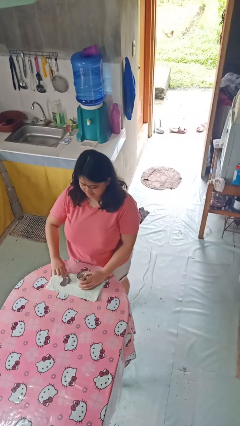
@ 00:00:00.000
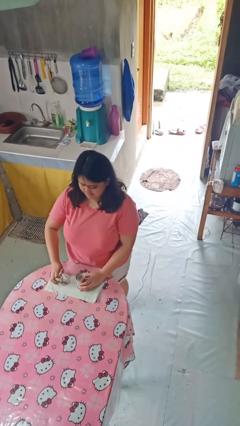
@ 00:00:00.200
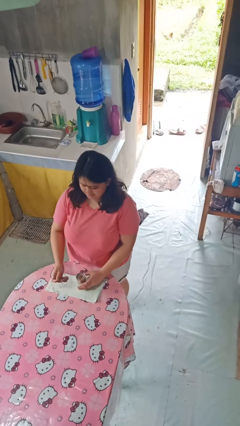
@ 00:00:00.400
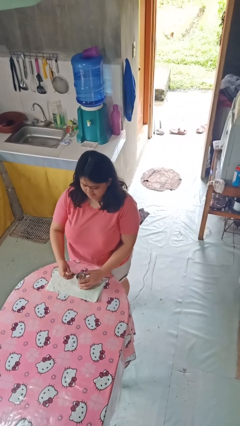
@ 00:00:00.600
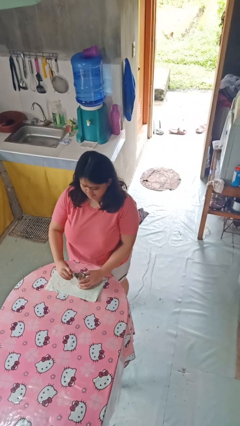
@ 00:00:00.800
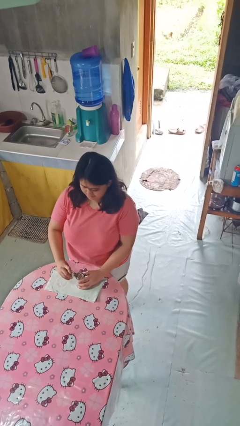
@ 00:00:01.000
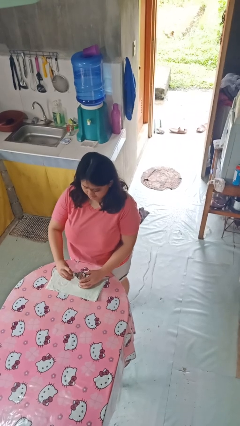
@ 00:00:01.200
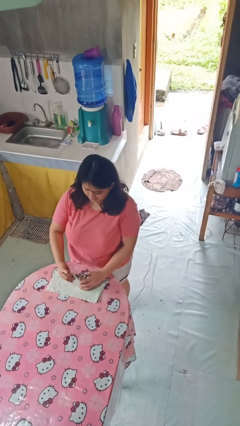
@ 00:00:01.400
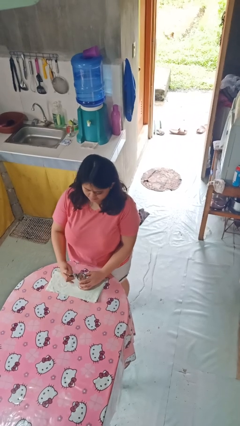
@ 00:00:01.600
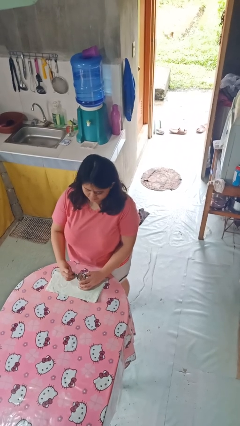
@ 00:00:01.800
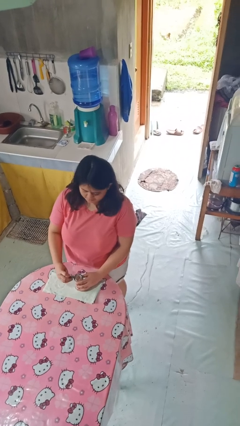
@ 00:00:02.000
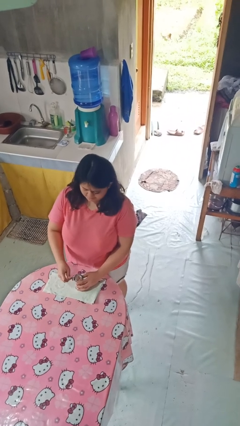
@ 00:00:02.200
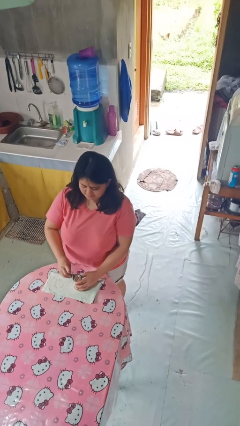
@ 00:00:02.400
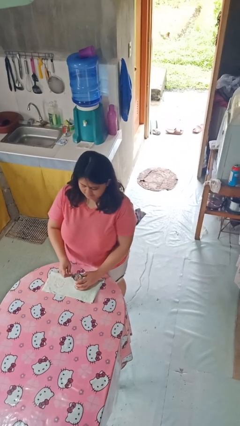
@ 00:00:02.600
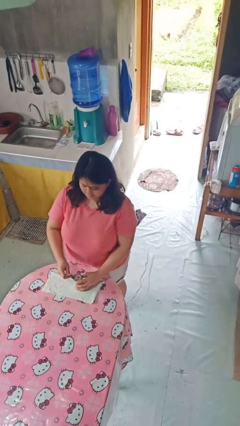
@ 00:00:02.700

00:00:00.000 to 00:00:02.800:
person opens can with can opener

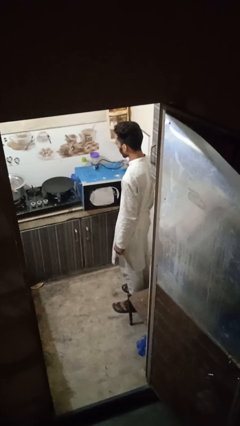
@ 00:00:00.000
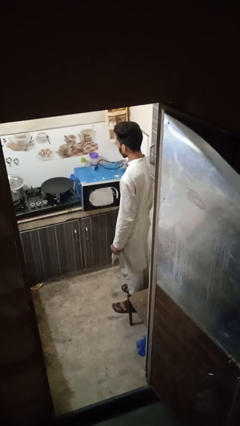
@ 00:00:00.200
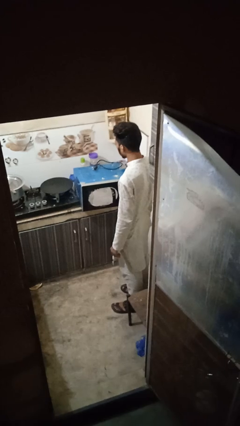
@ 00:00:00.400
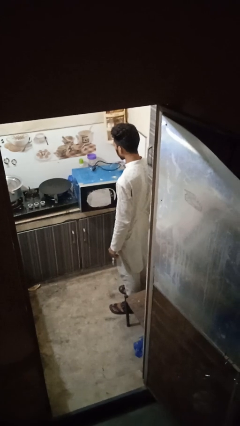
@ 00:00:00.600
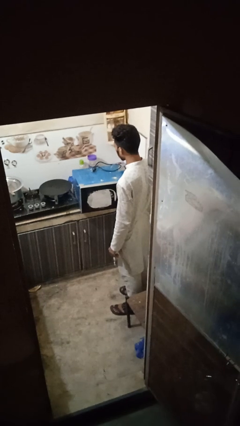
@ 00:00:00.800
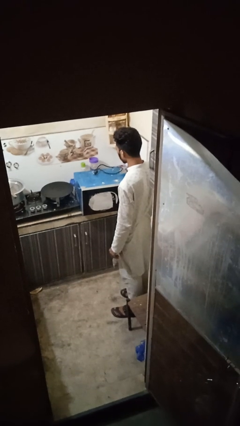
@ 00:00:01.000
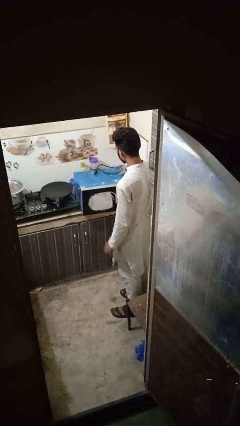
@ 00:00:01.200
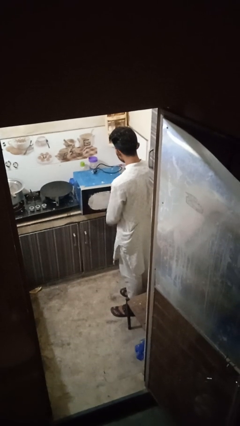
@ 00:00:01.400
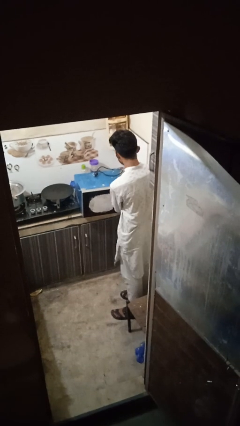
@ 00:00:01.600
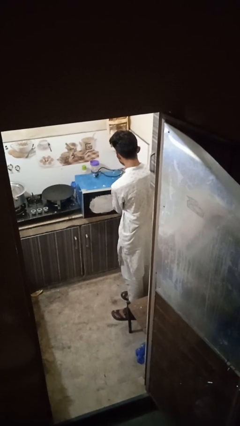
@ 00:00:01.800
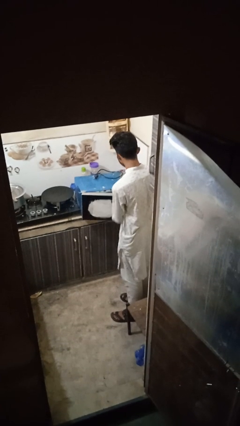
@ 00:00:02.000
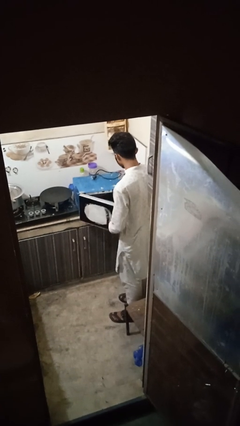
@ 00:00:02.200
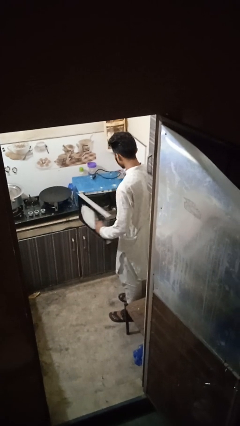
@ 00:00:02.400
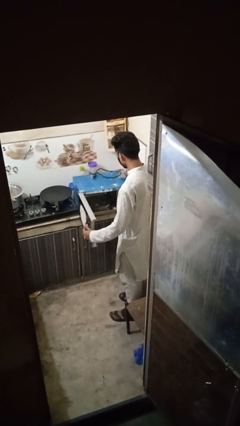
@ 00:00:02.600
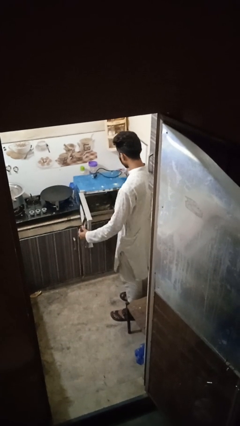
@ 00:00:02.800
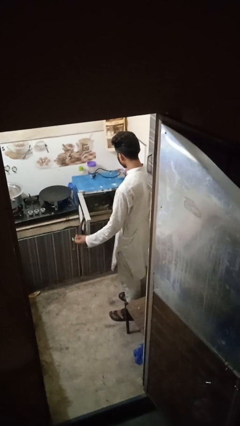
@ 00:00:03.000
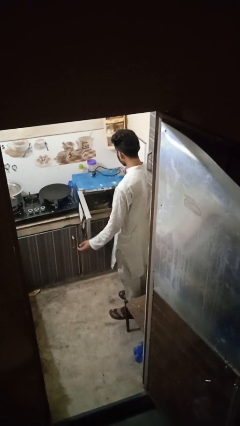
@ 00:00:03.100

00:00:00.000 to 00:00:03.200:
person opens oven door

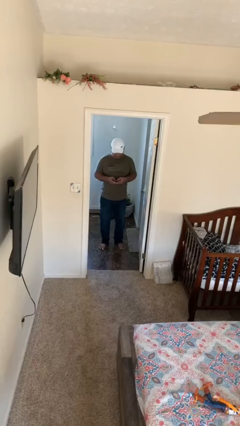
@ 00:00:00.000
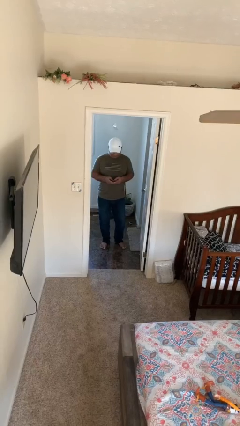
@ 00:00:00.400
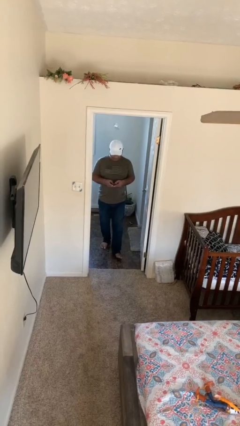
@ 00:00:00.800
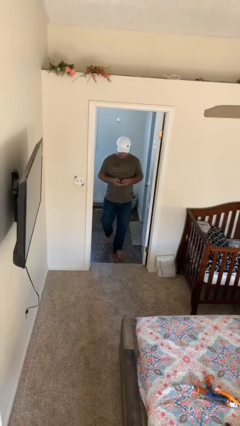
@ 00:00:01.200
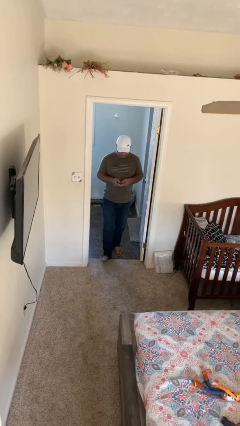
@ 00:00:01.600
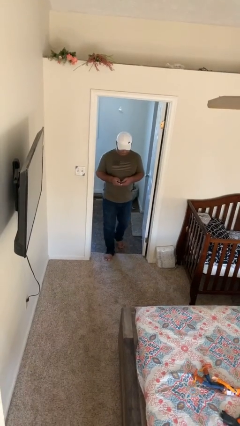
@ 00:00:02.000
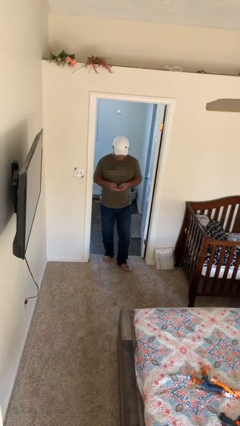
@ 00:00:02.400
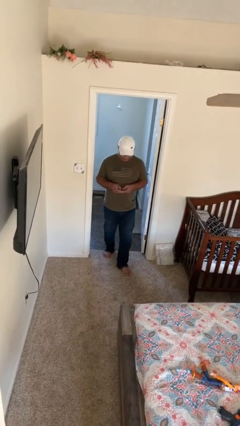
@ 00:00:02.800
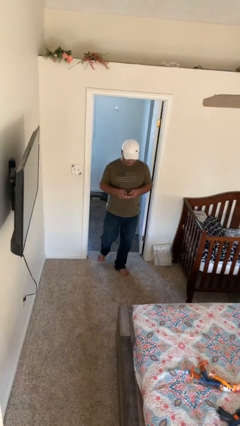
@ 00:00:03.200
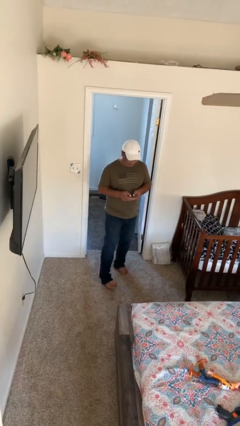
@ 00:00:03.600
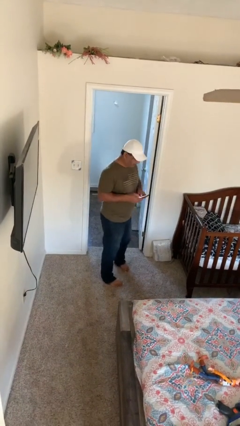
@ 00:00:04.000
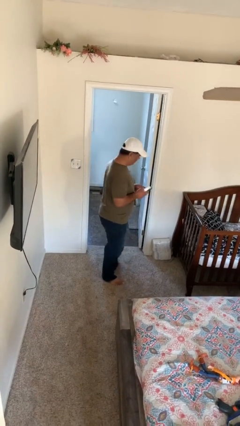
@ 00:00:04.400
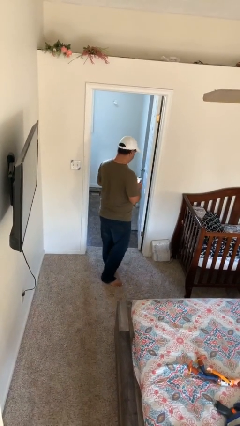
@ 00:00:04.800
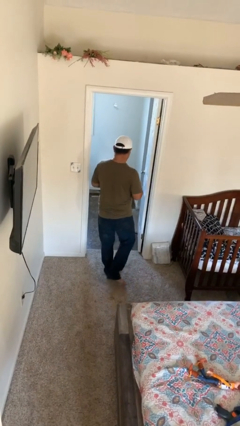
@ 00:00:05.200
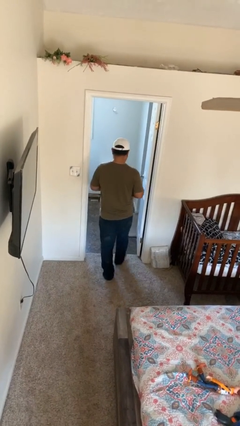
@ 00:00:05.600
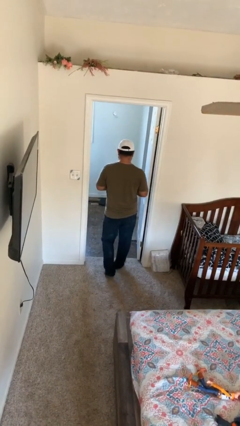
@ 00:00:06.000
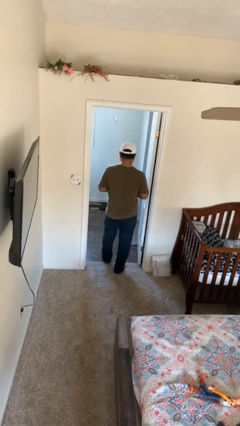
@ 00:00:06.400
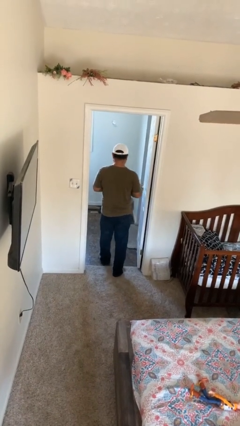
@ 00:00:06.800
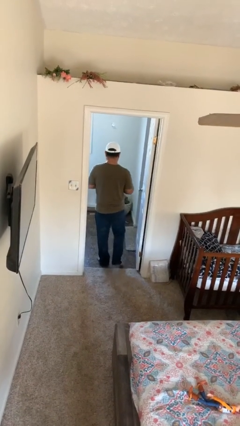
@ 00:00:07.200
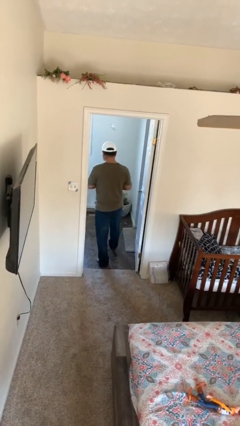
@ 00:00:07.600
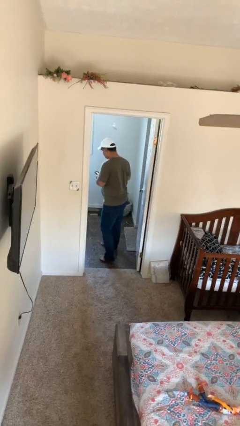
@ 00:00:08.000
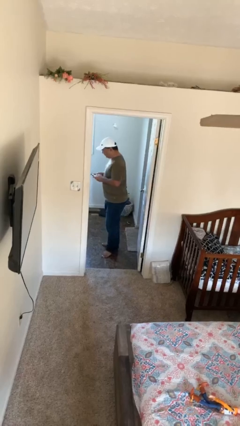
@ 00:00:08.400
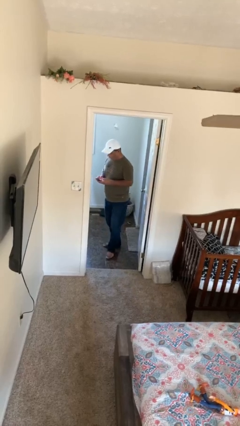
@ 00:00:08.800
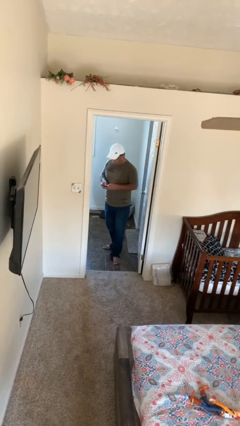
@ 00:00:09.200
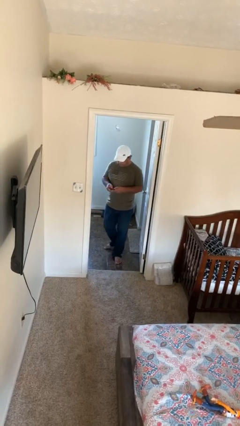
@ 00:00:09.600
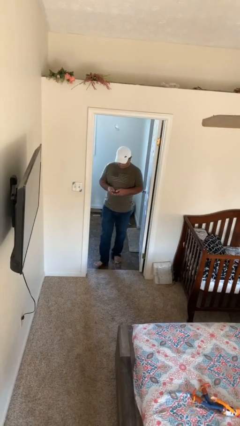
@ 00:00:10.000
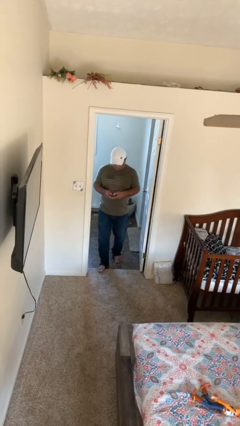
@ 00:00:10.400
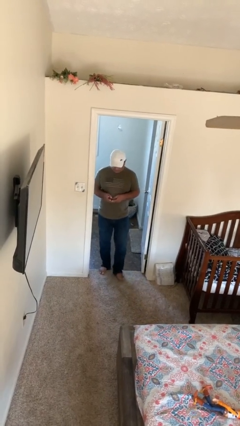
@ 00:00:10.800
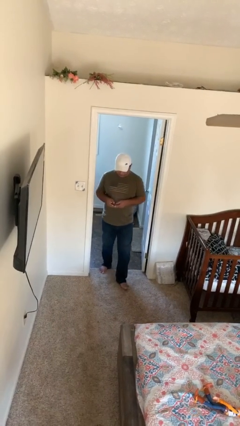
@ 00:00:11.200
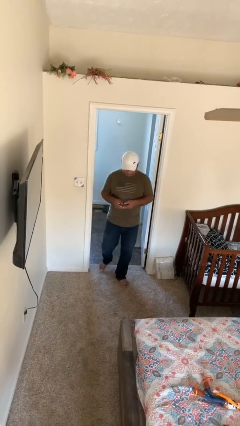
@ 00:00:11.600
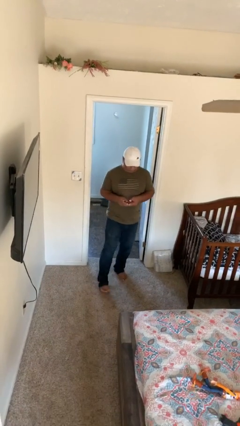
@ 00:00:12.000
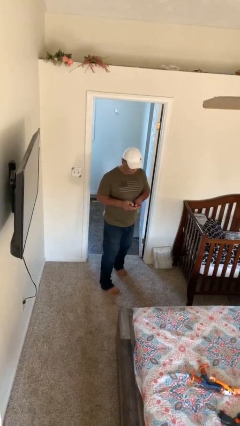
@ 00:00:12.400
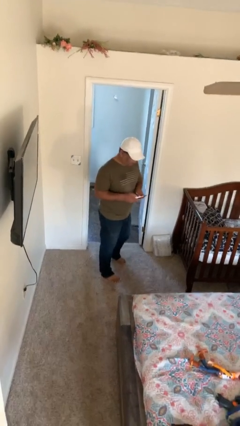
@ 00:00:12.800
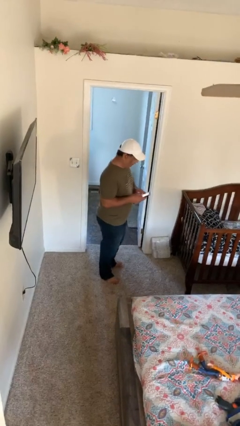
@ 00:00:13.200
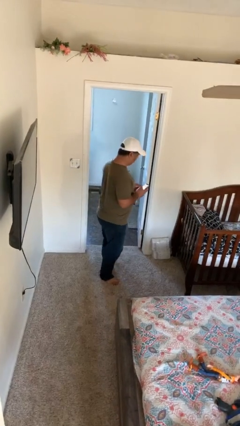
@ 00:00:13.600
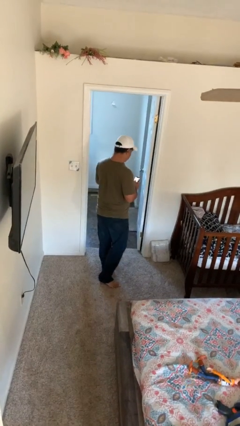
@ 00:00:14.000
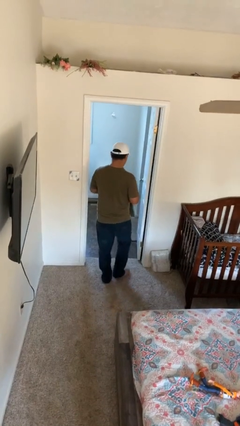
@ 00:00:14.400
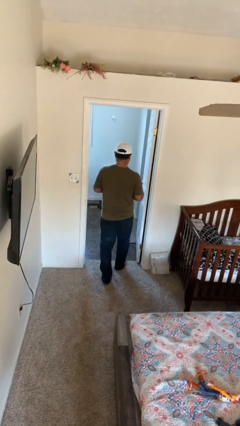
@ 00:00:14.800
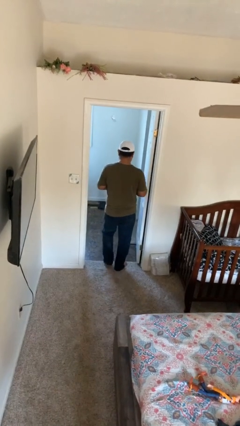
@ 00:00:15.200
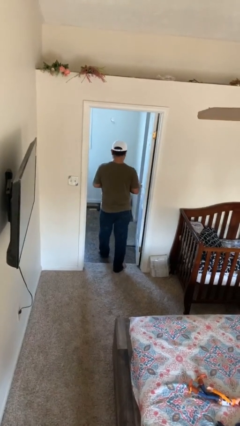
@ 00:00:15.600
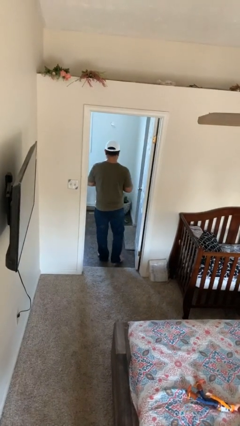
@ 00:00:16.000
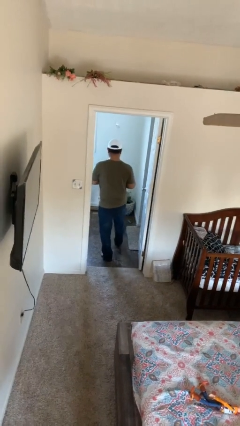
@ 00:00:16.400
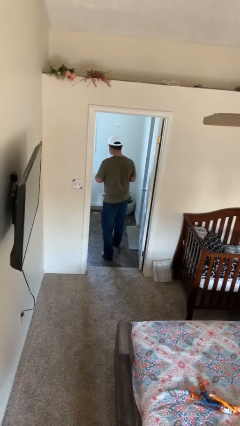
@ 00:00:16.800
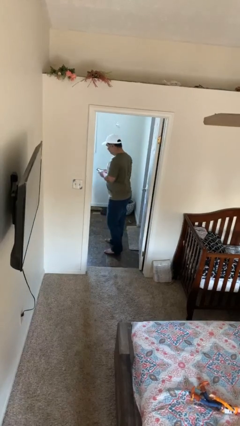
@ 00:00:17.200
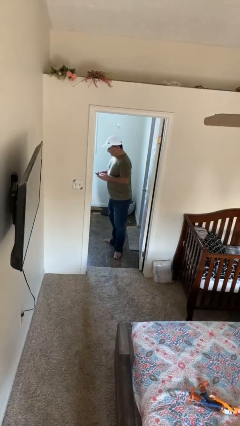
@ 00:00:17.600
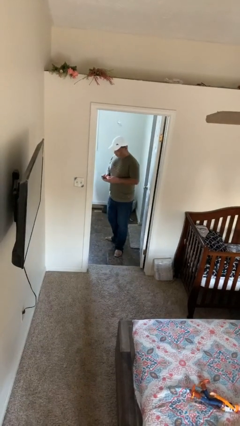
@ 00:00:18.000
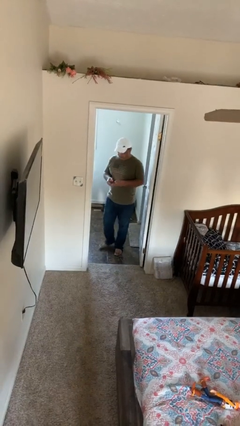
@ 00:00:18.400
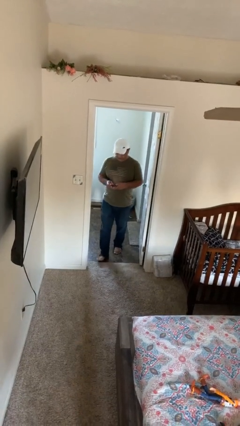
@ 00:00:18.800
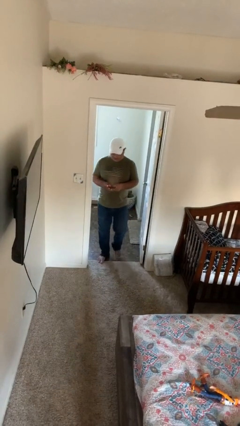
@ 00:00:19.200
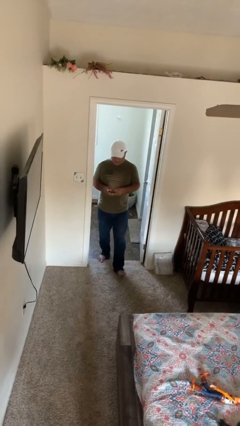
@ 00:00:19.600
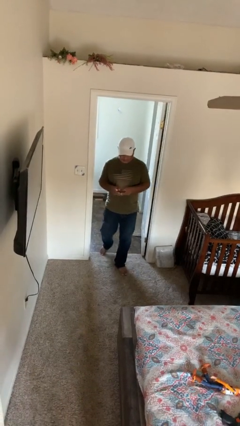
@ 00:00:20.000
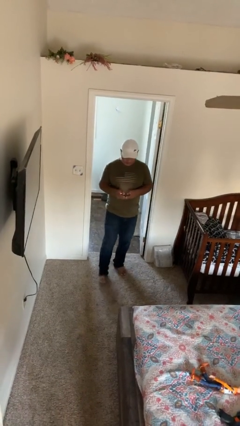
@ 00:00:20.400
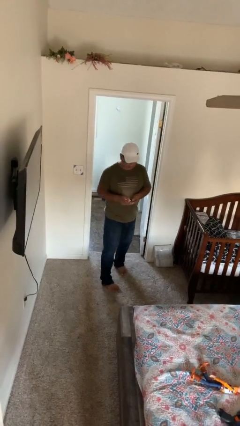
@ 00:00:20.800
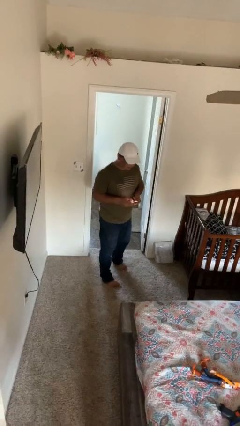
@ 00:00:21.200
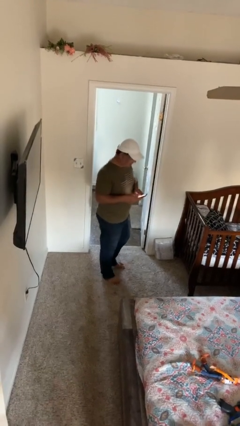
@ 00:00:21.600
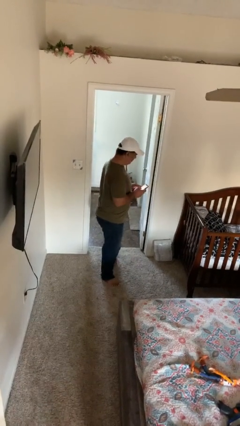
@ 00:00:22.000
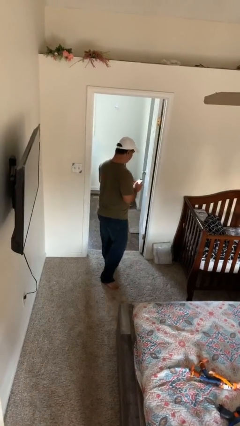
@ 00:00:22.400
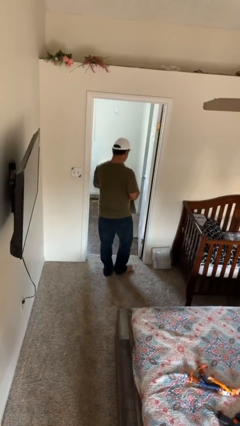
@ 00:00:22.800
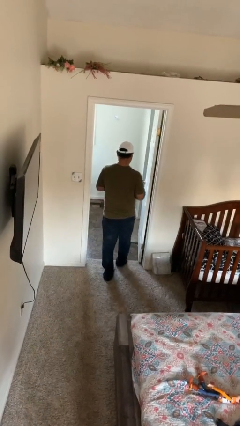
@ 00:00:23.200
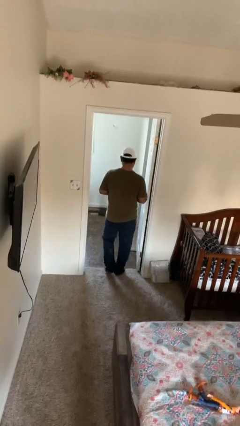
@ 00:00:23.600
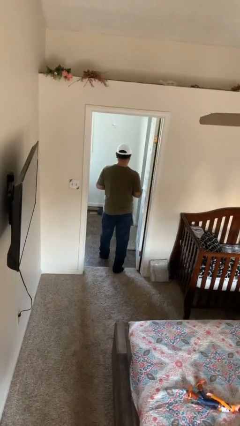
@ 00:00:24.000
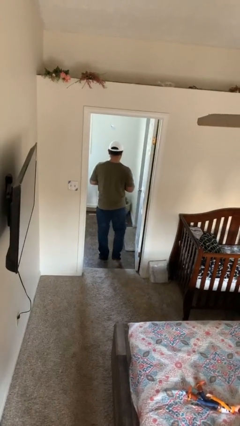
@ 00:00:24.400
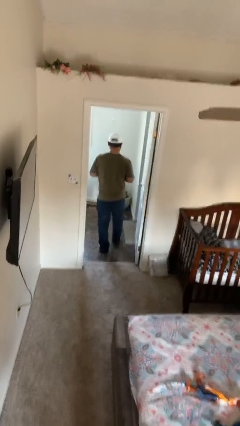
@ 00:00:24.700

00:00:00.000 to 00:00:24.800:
person texts on phone
